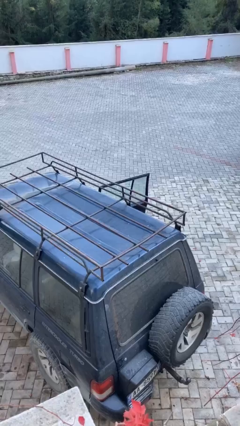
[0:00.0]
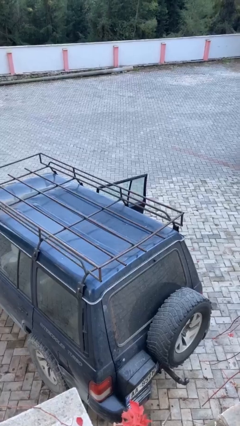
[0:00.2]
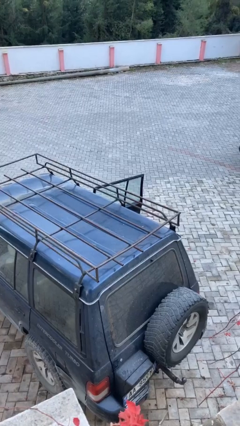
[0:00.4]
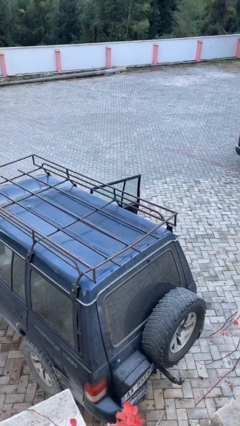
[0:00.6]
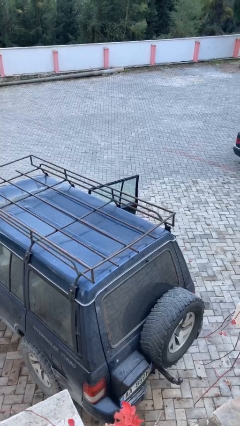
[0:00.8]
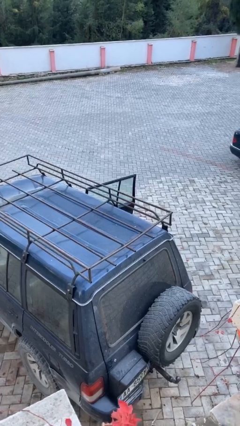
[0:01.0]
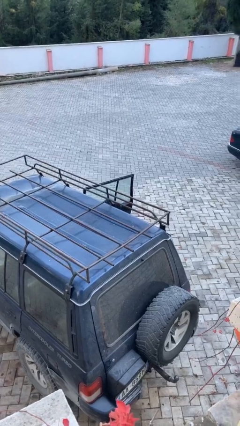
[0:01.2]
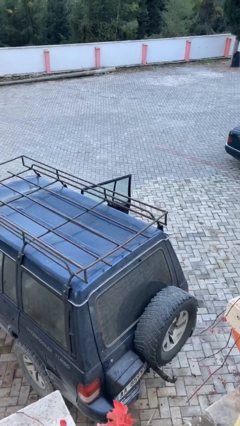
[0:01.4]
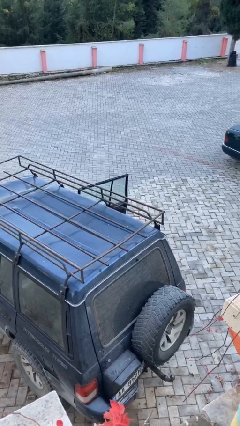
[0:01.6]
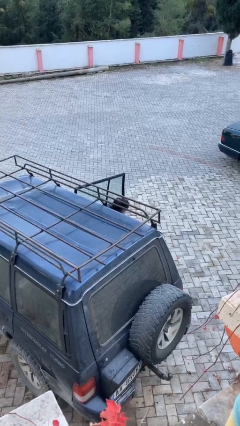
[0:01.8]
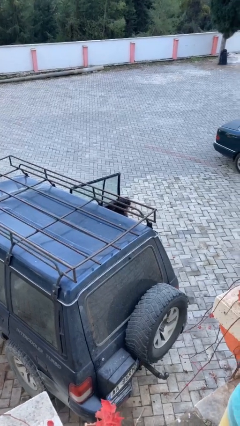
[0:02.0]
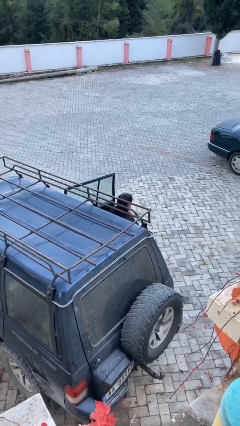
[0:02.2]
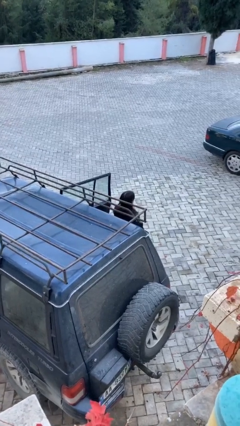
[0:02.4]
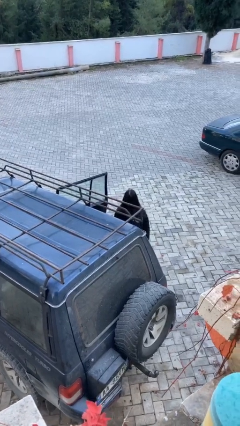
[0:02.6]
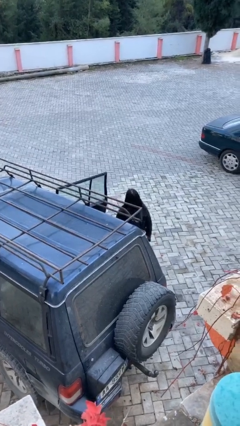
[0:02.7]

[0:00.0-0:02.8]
person exits car

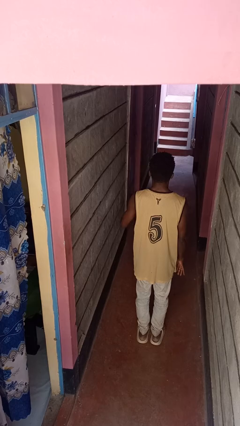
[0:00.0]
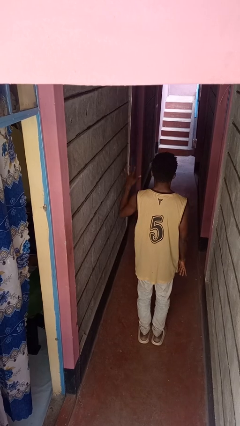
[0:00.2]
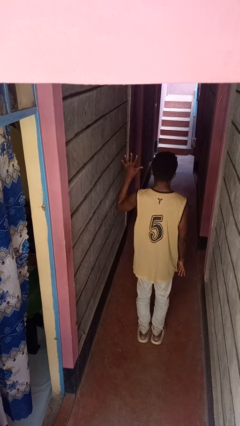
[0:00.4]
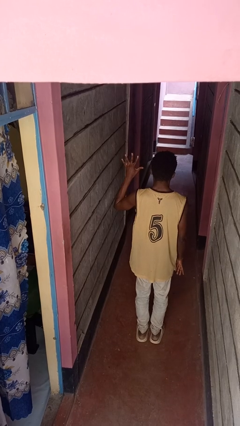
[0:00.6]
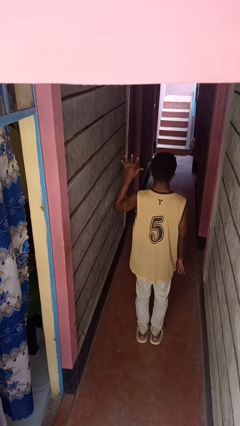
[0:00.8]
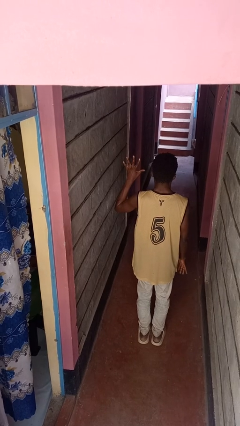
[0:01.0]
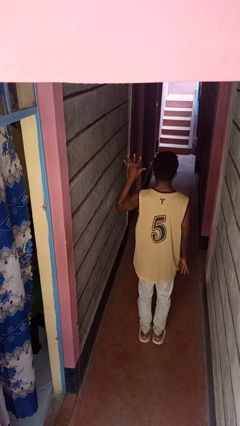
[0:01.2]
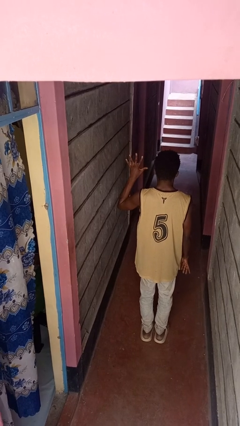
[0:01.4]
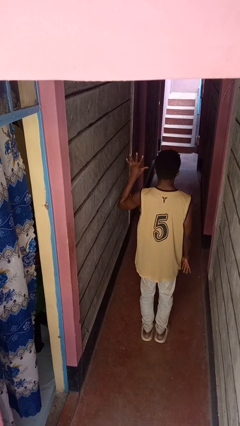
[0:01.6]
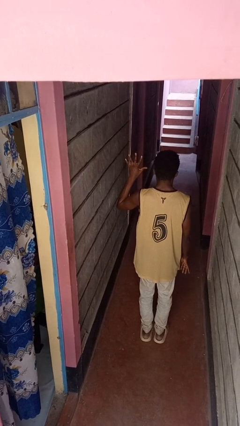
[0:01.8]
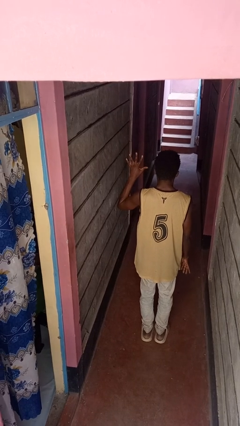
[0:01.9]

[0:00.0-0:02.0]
person gestures number five

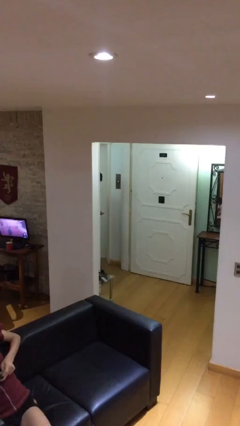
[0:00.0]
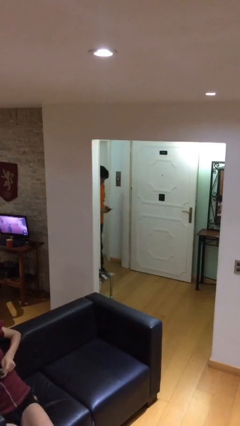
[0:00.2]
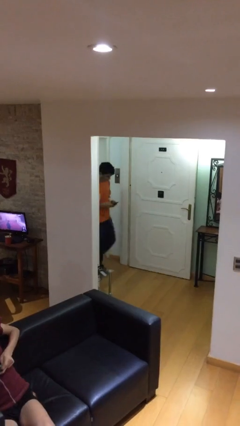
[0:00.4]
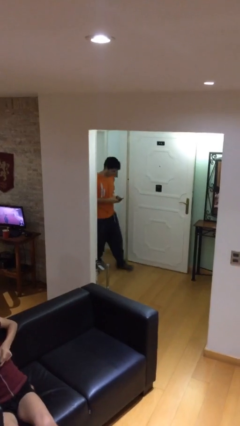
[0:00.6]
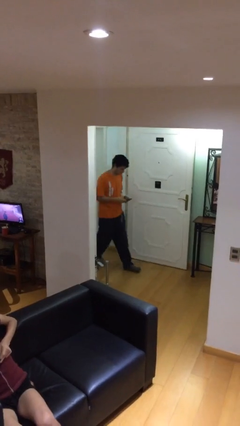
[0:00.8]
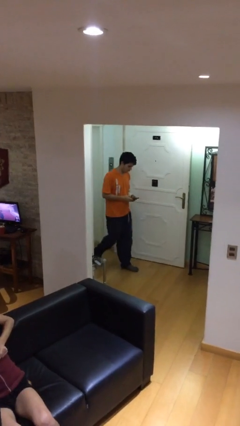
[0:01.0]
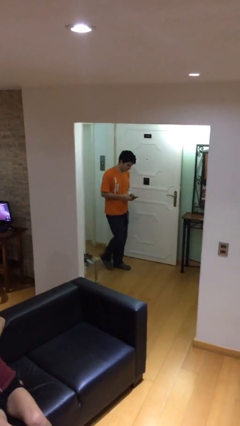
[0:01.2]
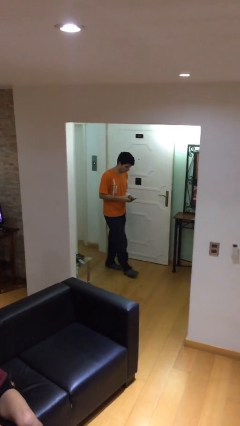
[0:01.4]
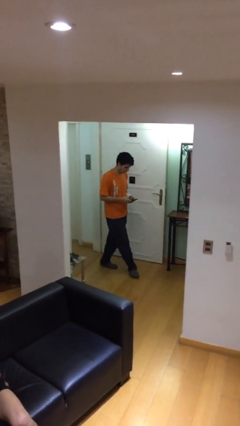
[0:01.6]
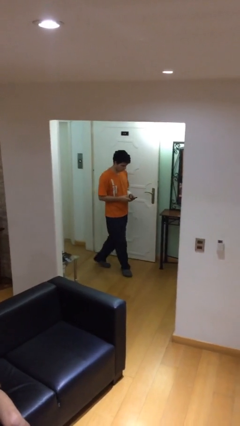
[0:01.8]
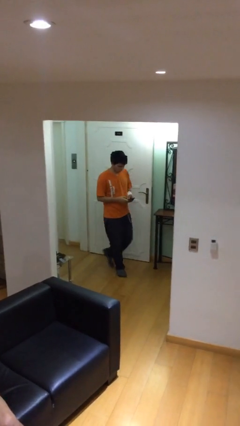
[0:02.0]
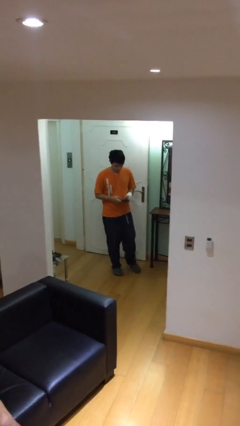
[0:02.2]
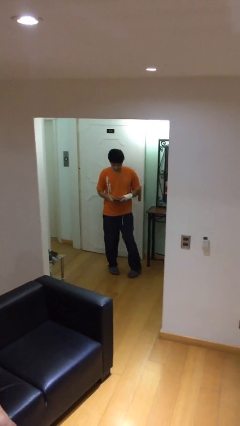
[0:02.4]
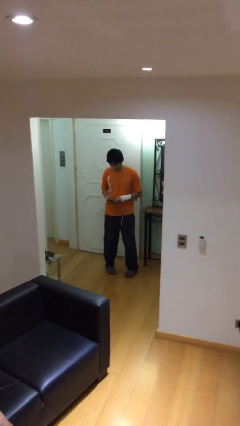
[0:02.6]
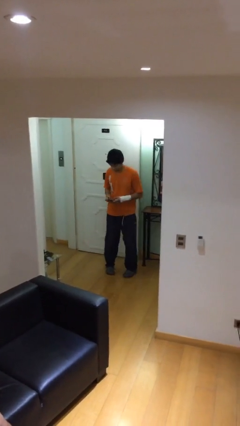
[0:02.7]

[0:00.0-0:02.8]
person enters scene through structure

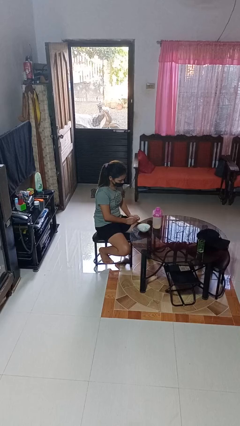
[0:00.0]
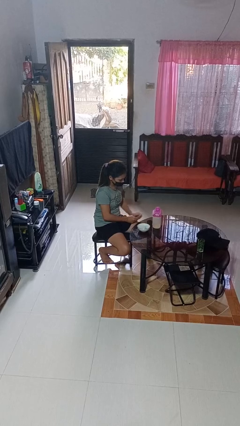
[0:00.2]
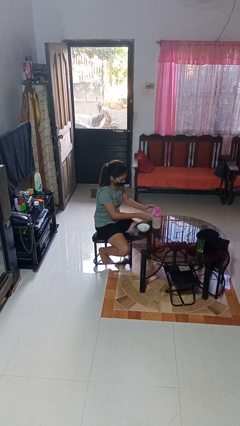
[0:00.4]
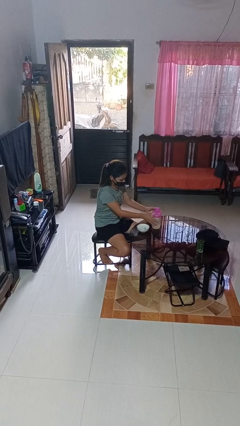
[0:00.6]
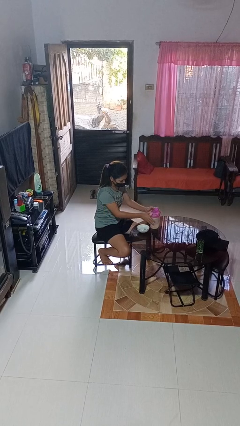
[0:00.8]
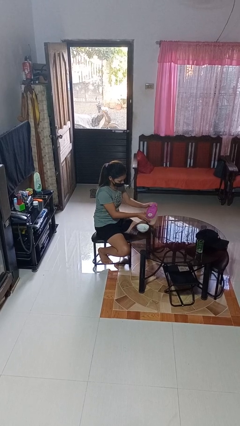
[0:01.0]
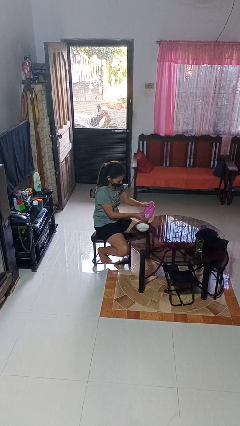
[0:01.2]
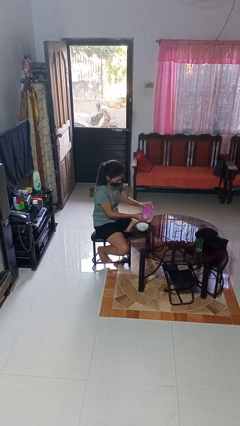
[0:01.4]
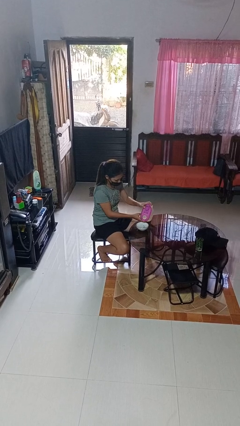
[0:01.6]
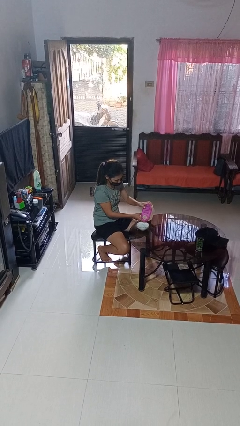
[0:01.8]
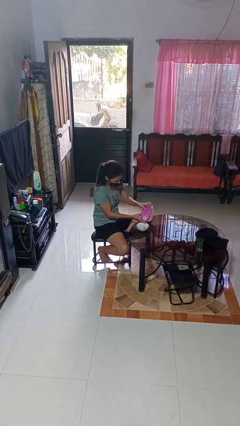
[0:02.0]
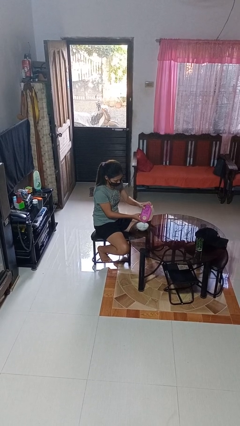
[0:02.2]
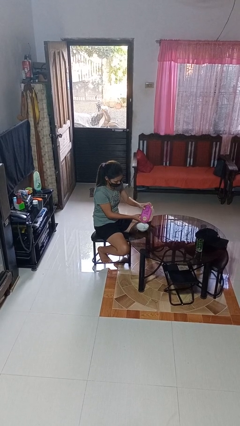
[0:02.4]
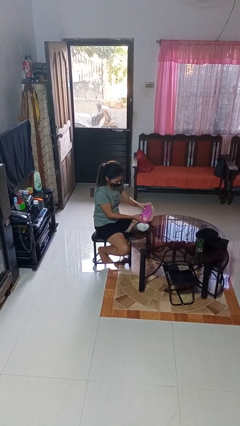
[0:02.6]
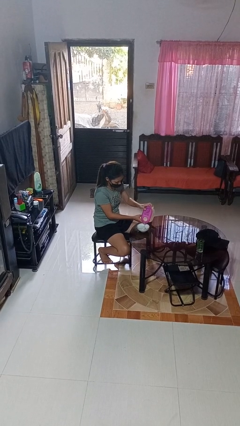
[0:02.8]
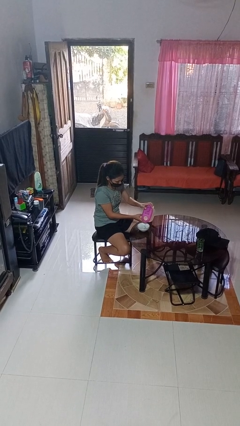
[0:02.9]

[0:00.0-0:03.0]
person pours into bowl

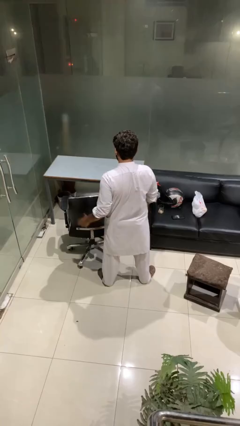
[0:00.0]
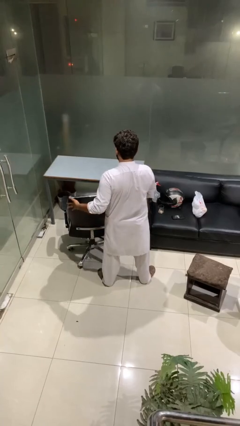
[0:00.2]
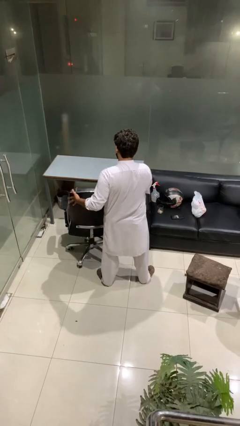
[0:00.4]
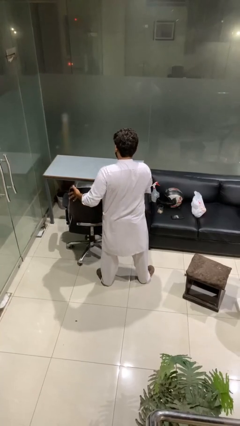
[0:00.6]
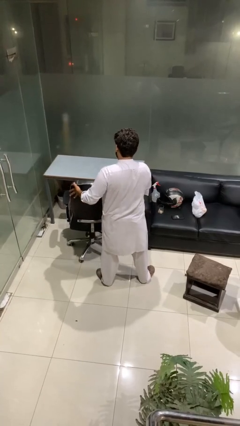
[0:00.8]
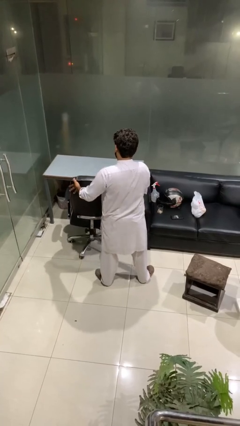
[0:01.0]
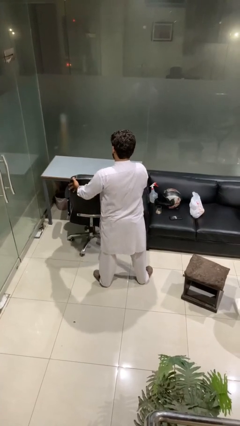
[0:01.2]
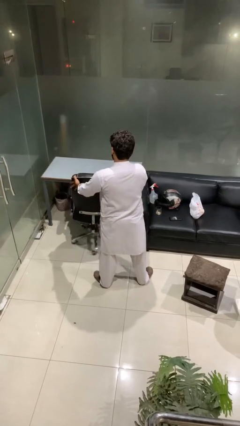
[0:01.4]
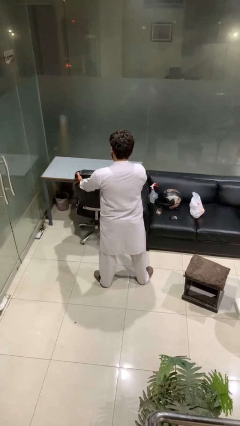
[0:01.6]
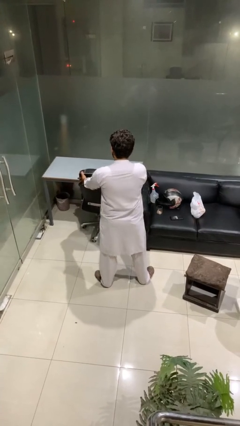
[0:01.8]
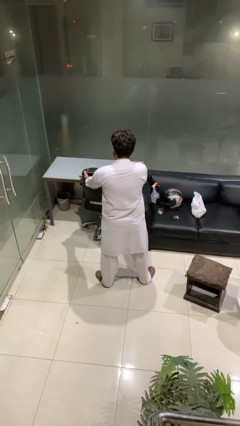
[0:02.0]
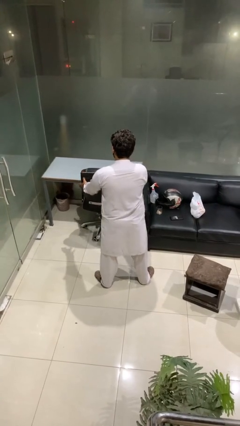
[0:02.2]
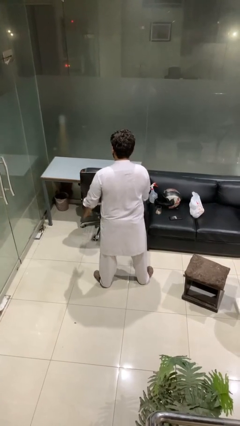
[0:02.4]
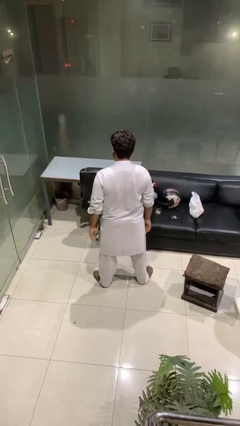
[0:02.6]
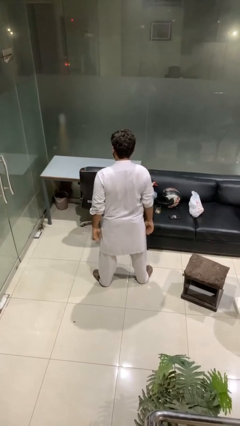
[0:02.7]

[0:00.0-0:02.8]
person pushes in chair

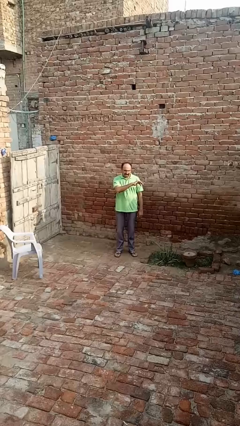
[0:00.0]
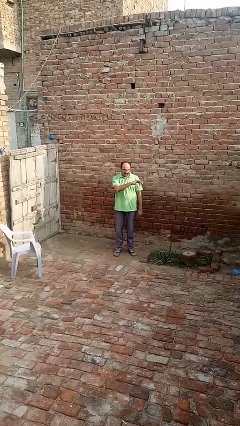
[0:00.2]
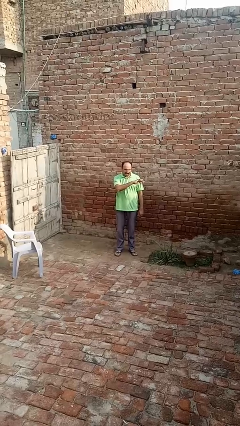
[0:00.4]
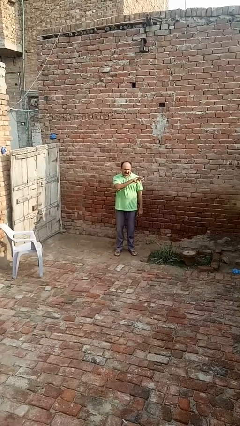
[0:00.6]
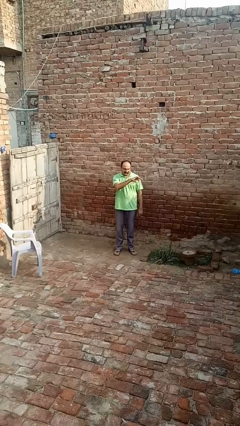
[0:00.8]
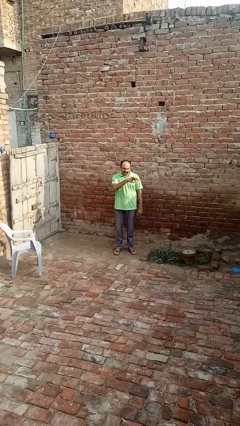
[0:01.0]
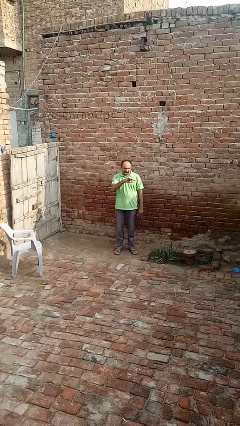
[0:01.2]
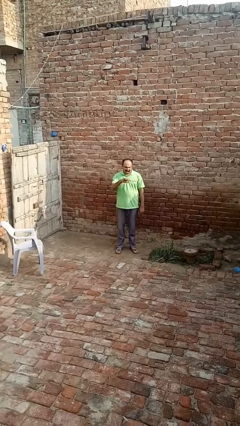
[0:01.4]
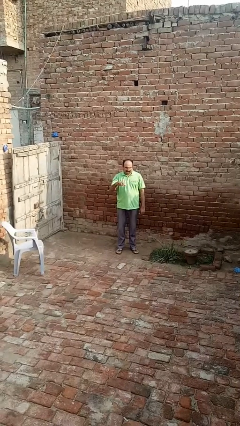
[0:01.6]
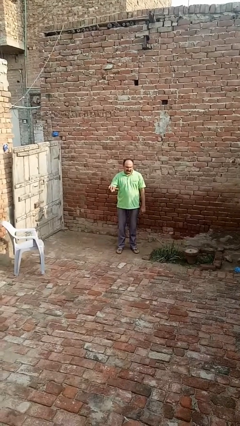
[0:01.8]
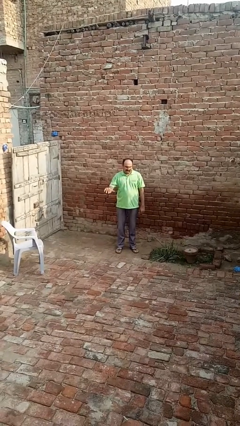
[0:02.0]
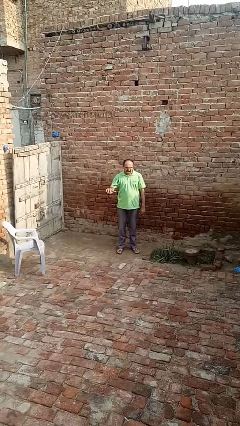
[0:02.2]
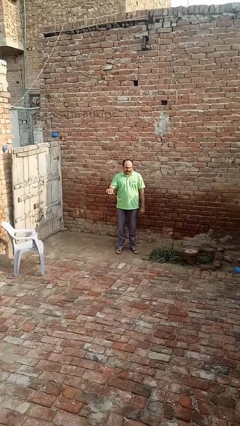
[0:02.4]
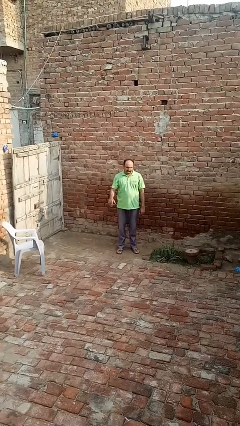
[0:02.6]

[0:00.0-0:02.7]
person gestures swipe right

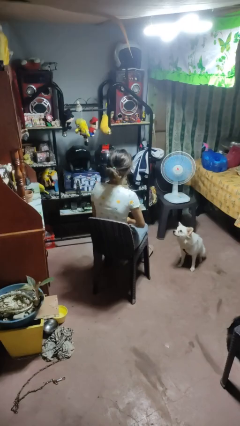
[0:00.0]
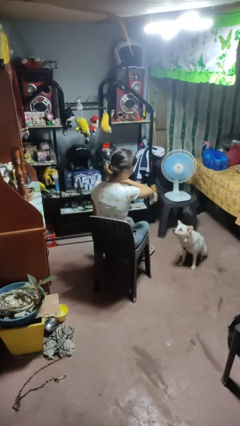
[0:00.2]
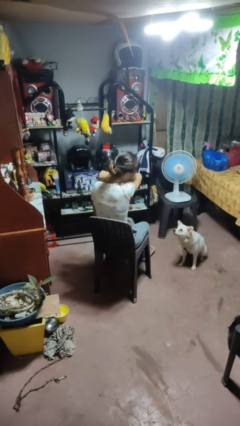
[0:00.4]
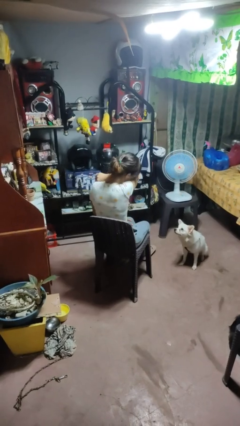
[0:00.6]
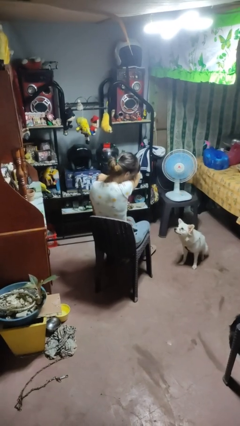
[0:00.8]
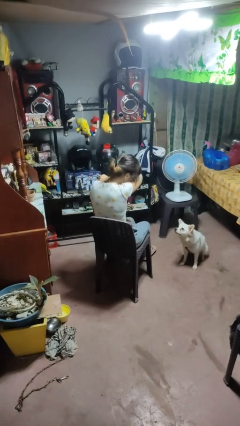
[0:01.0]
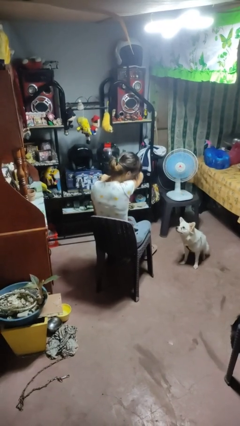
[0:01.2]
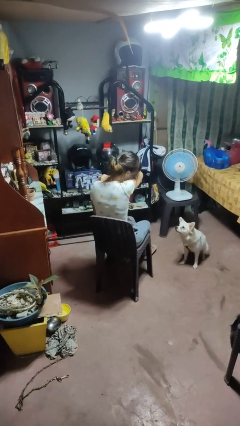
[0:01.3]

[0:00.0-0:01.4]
person sneezes into arm
